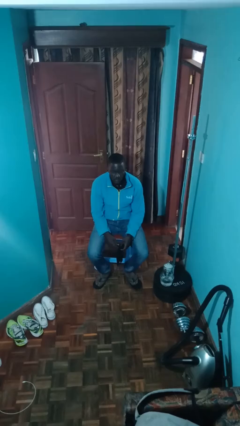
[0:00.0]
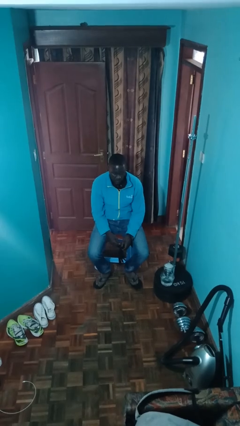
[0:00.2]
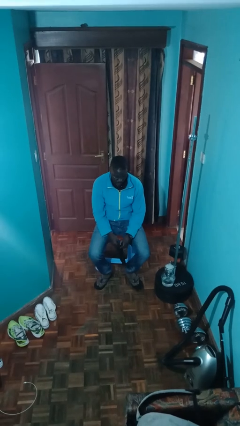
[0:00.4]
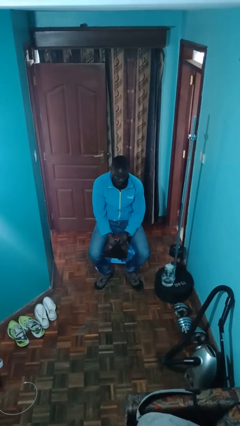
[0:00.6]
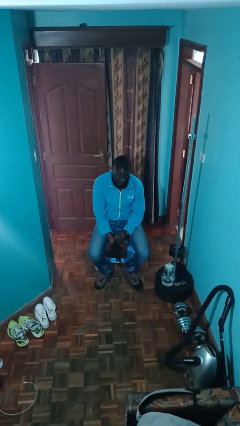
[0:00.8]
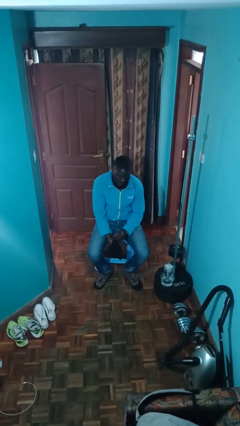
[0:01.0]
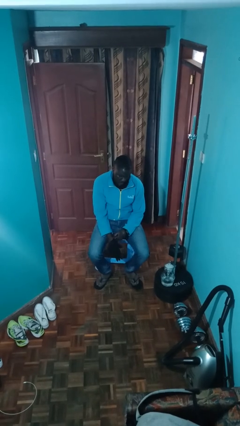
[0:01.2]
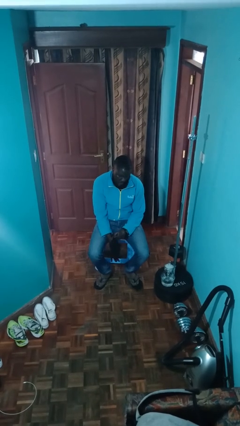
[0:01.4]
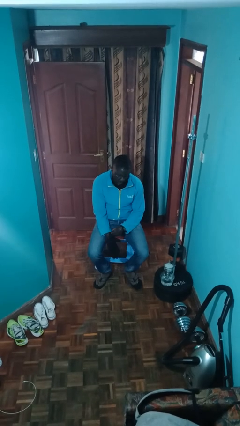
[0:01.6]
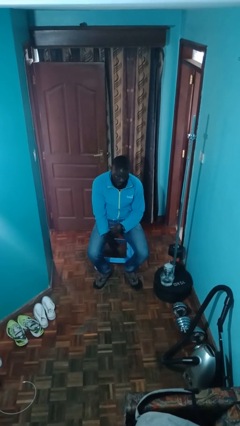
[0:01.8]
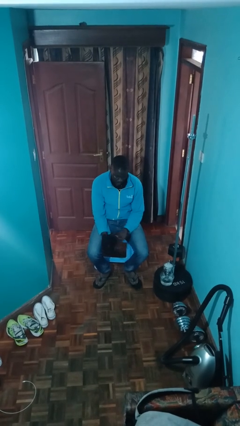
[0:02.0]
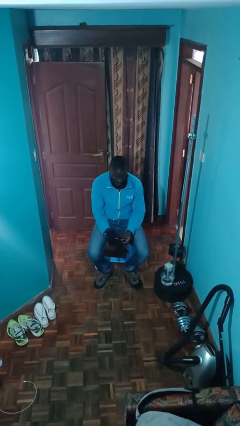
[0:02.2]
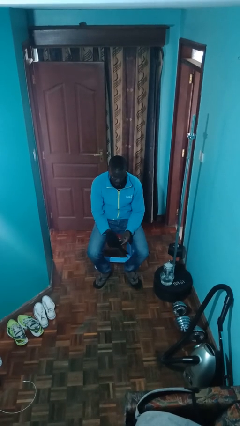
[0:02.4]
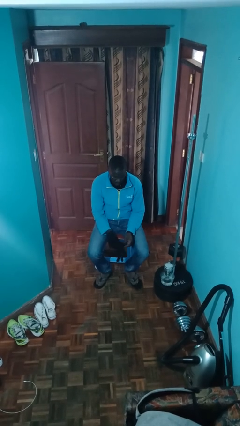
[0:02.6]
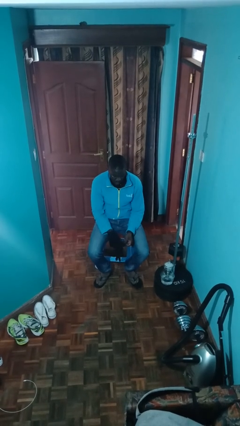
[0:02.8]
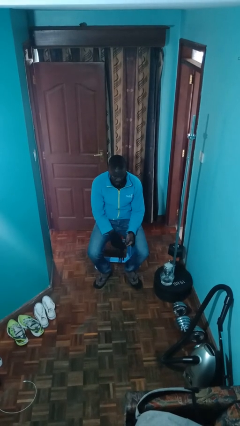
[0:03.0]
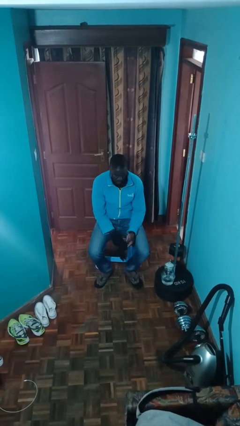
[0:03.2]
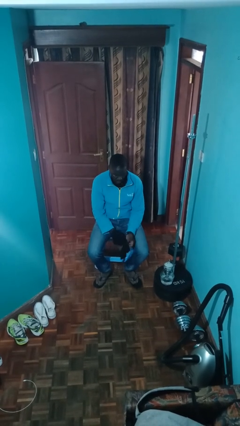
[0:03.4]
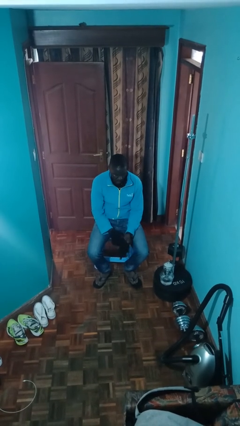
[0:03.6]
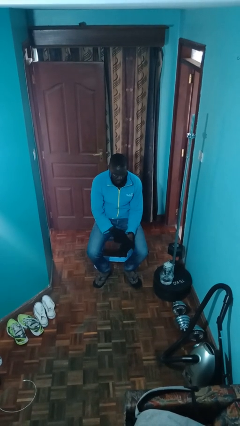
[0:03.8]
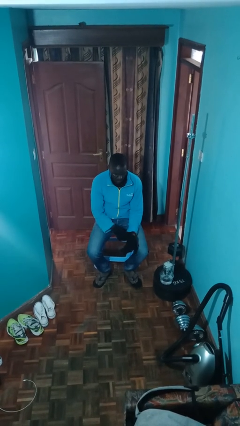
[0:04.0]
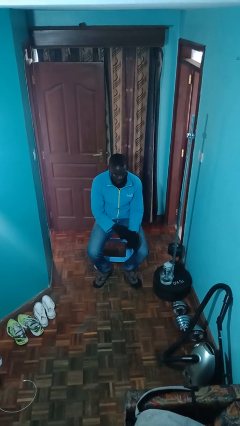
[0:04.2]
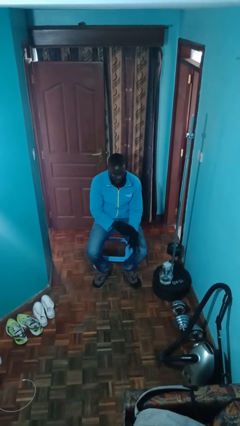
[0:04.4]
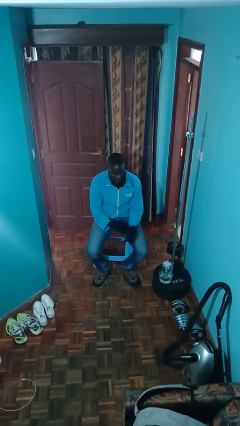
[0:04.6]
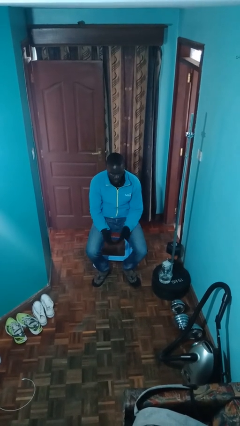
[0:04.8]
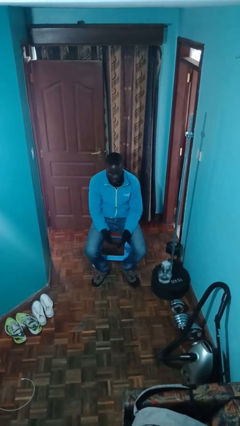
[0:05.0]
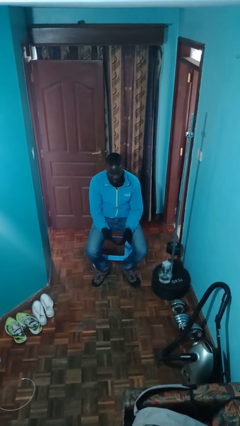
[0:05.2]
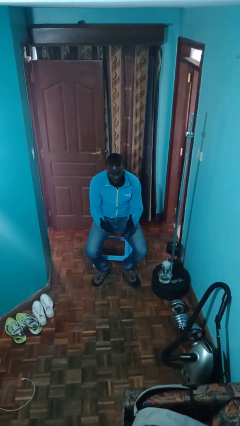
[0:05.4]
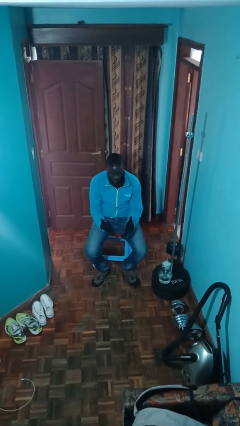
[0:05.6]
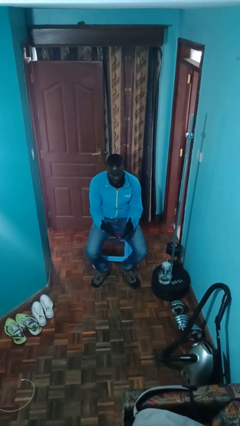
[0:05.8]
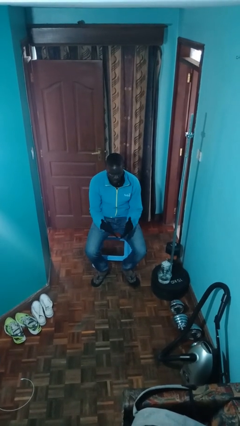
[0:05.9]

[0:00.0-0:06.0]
person puts on gloves

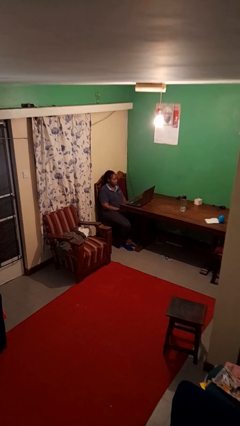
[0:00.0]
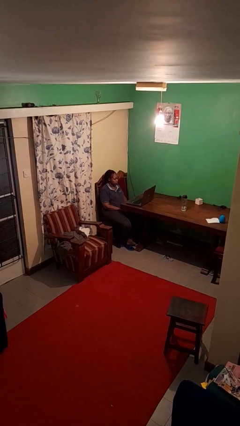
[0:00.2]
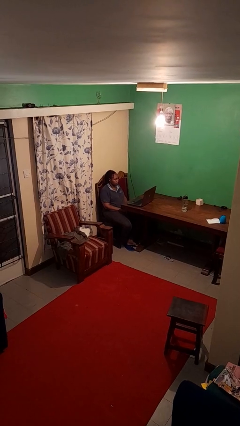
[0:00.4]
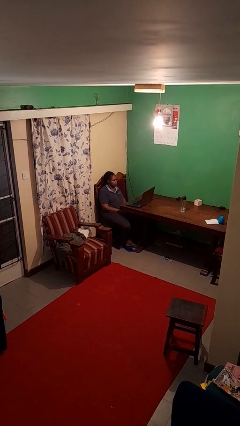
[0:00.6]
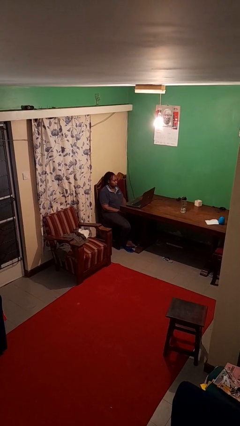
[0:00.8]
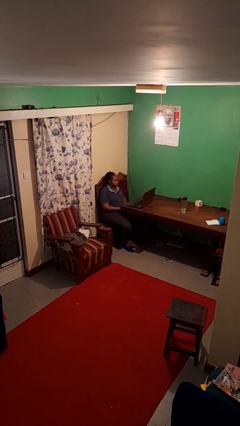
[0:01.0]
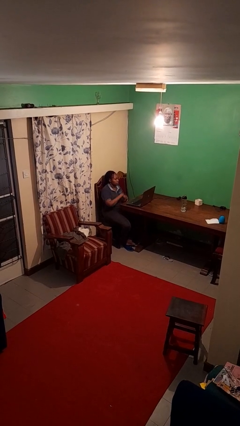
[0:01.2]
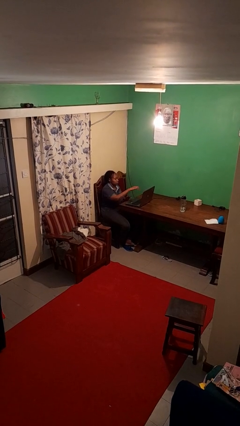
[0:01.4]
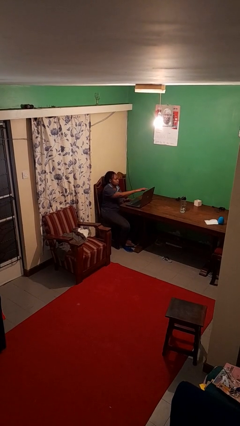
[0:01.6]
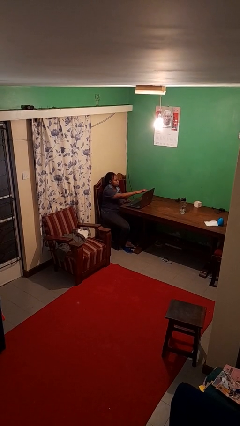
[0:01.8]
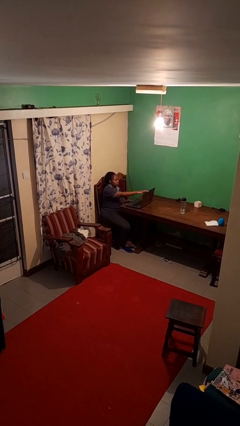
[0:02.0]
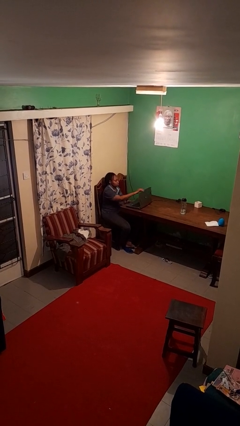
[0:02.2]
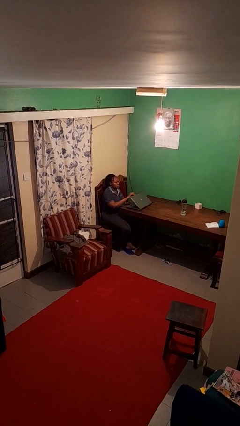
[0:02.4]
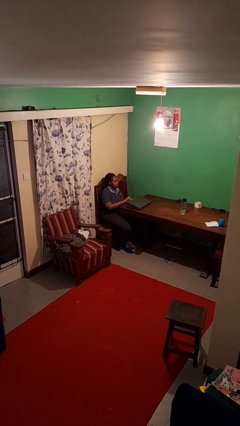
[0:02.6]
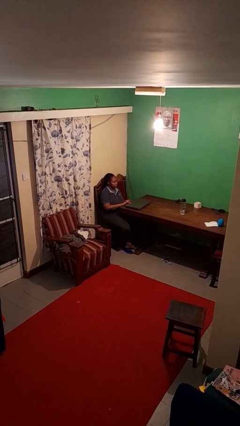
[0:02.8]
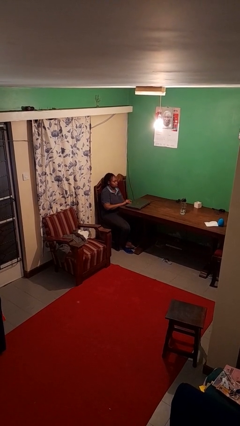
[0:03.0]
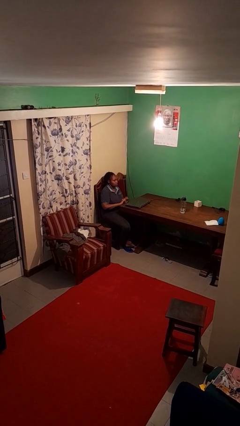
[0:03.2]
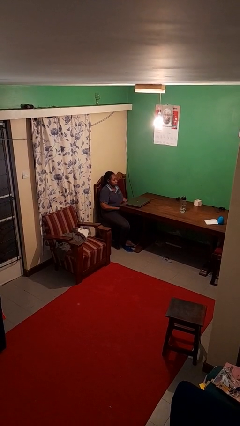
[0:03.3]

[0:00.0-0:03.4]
person closes laptop

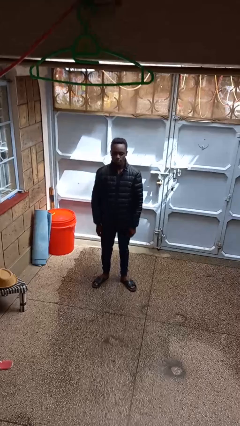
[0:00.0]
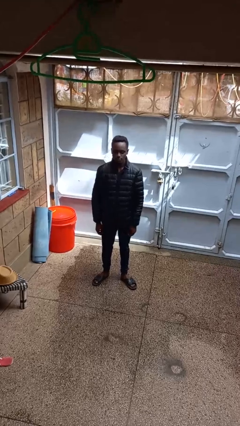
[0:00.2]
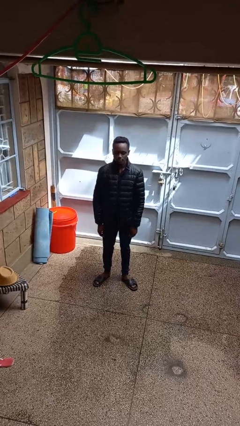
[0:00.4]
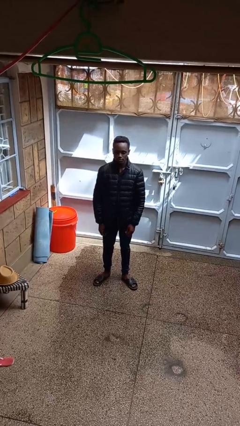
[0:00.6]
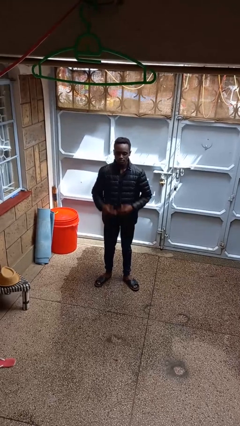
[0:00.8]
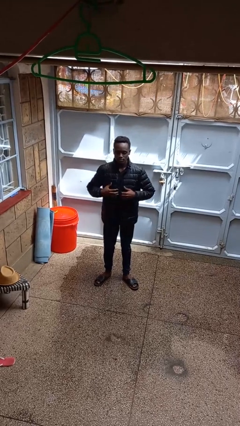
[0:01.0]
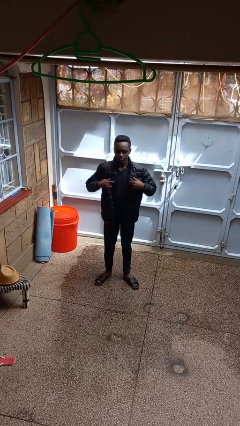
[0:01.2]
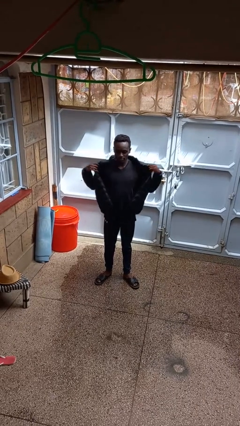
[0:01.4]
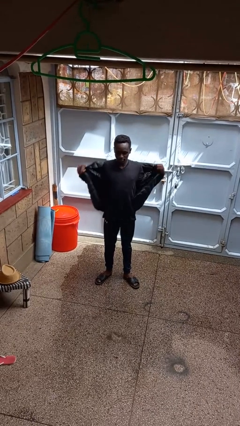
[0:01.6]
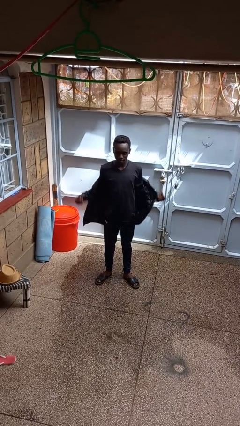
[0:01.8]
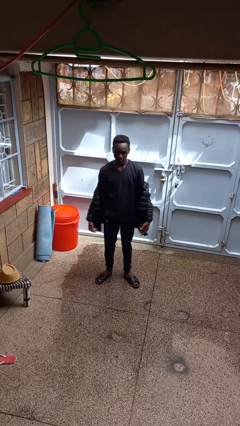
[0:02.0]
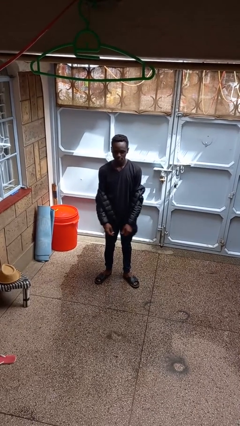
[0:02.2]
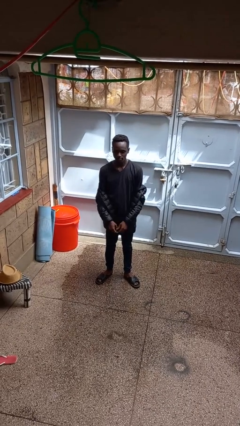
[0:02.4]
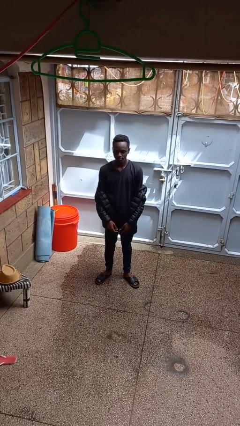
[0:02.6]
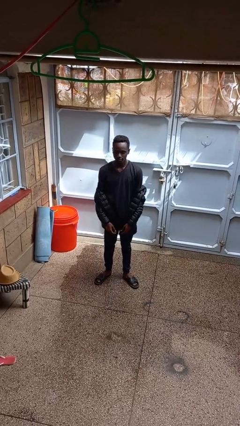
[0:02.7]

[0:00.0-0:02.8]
person takes off jacket

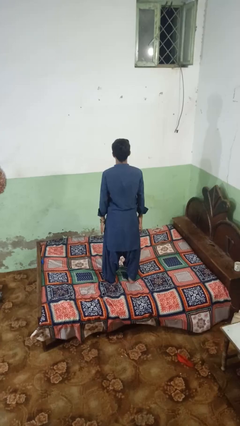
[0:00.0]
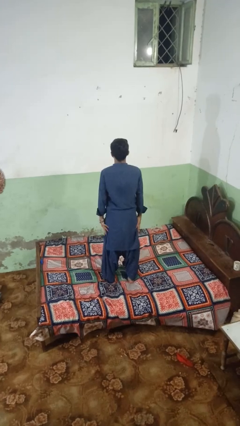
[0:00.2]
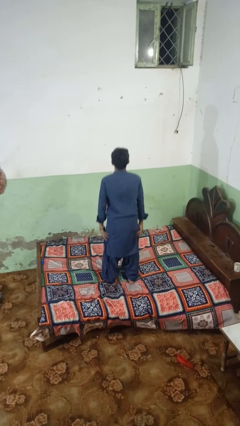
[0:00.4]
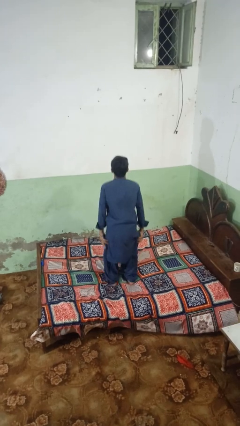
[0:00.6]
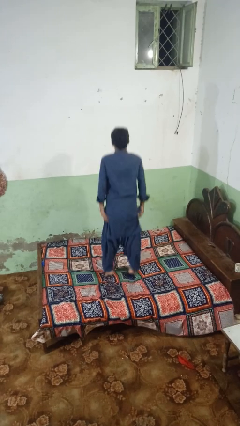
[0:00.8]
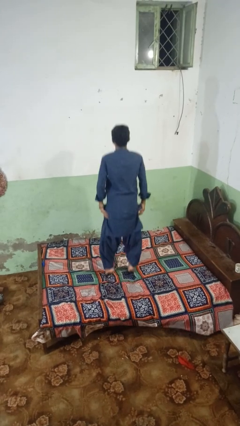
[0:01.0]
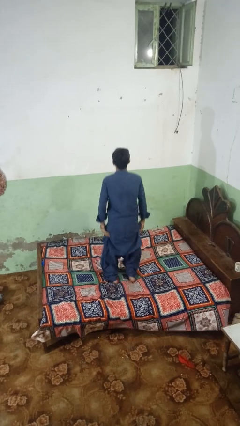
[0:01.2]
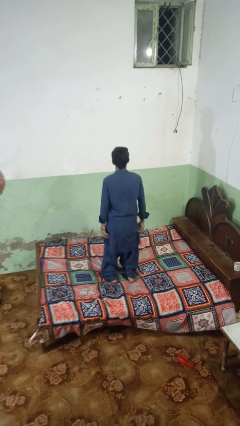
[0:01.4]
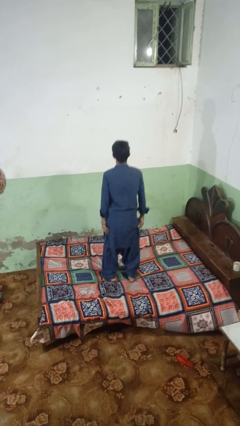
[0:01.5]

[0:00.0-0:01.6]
person jumps on bed

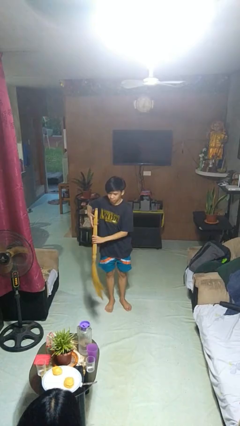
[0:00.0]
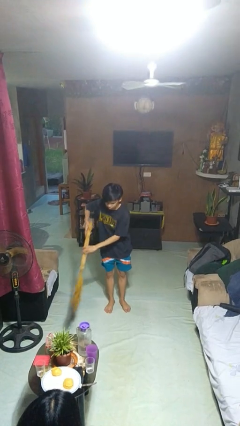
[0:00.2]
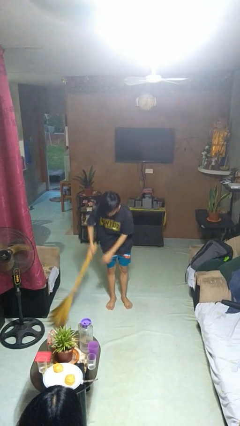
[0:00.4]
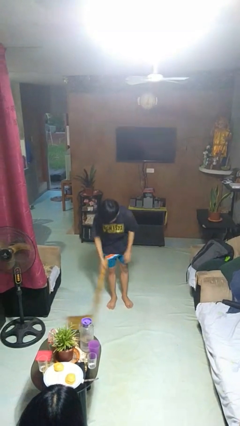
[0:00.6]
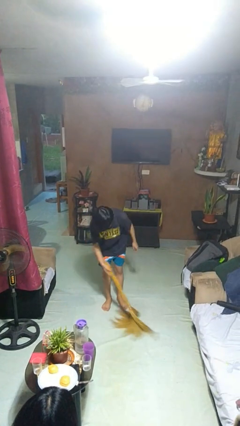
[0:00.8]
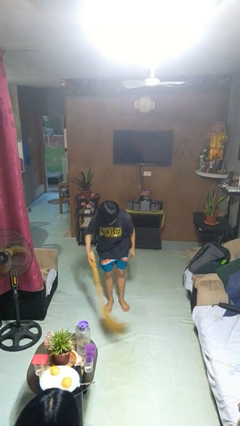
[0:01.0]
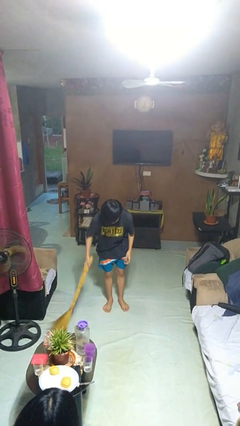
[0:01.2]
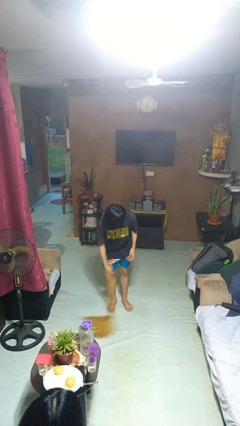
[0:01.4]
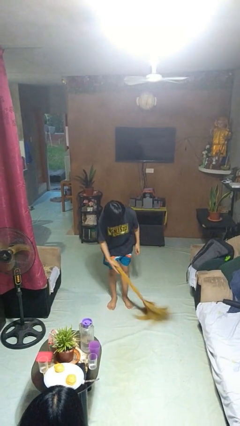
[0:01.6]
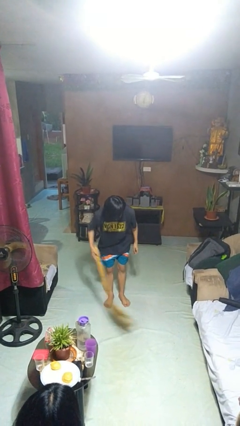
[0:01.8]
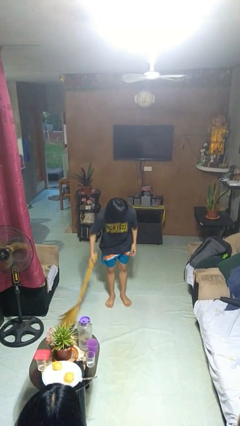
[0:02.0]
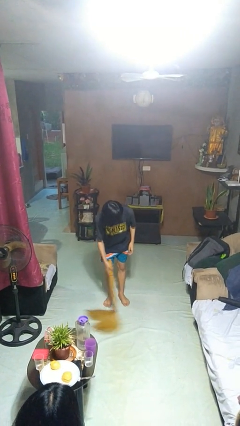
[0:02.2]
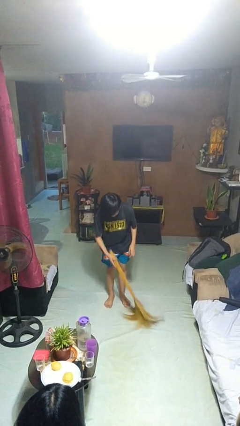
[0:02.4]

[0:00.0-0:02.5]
person sweeps floor

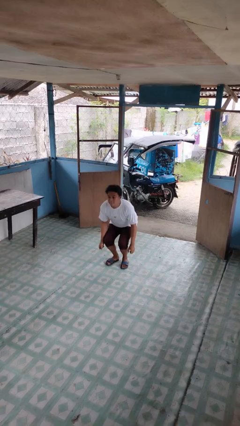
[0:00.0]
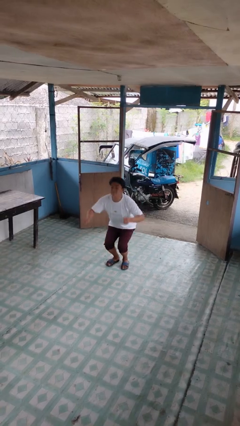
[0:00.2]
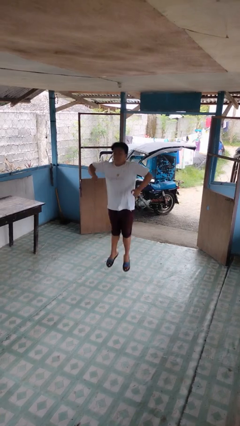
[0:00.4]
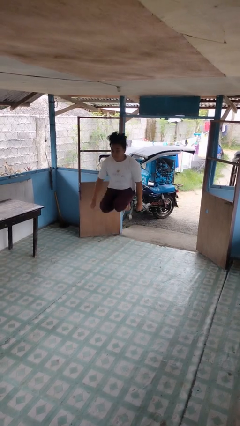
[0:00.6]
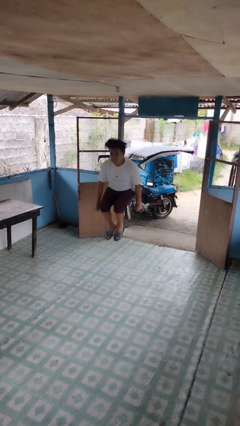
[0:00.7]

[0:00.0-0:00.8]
person jumps

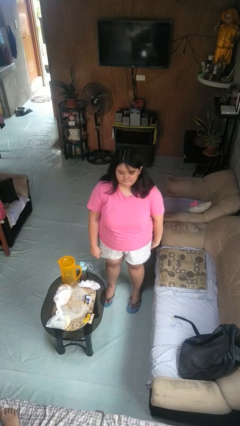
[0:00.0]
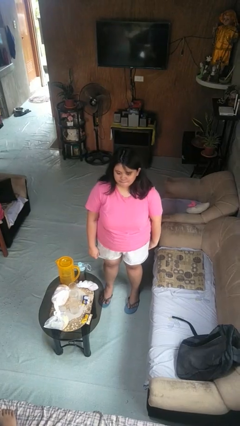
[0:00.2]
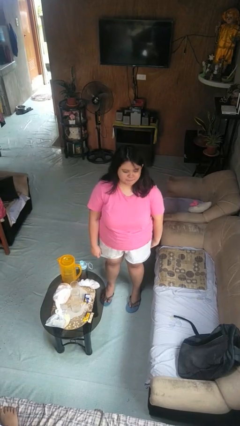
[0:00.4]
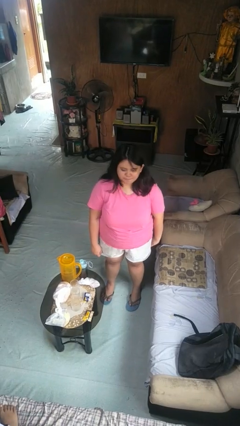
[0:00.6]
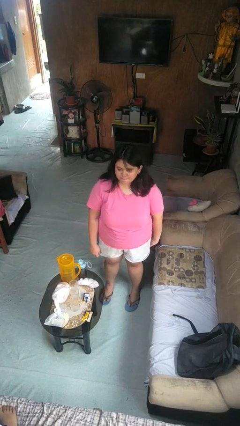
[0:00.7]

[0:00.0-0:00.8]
person shakes head
